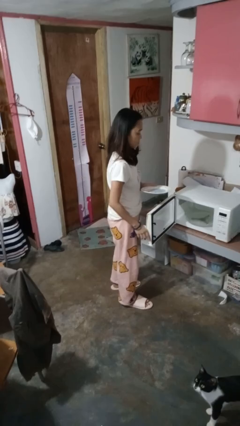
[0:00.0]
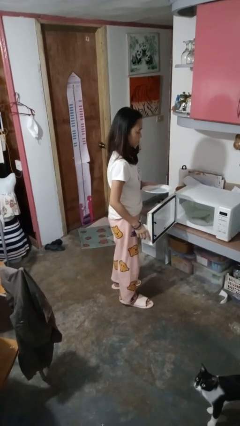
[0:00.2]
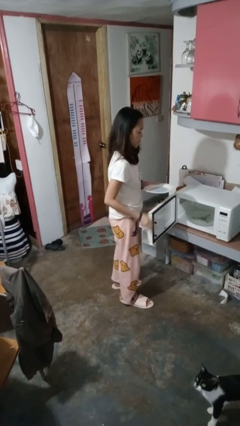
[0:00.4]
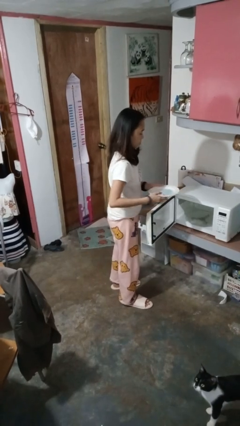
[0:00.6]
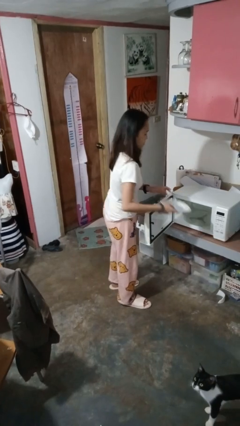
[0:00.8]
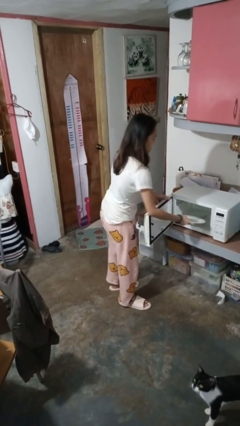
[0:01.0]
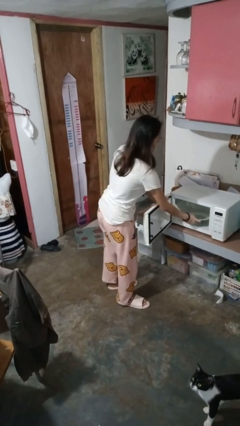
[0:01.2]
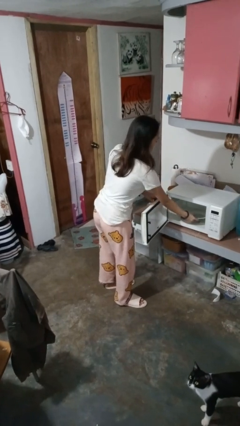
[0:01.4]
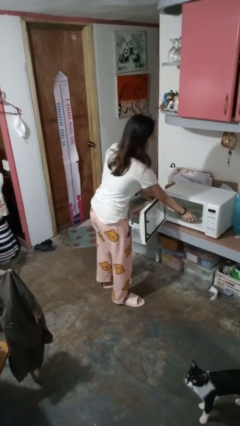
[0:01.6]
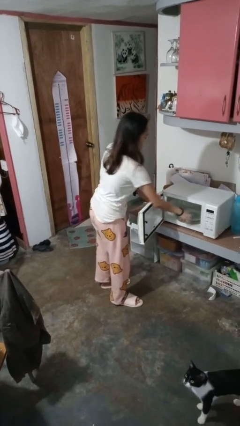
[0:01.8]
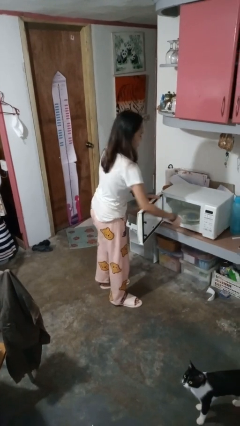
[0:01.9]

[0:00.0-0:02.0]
person puts object into microwave

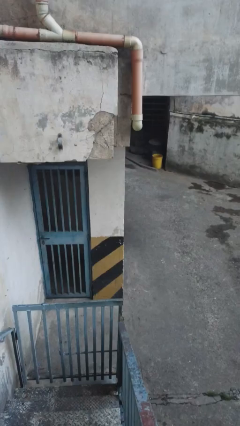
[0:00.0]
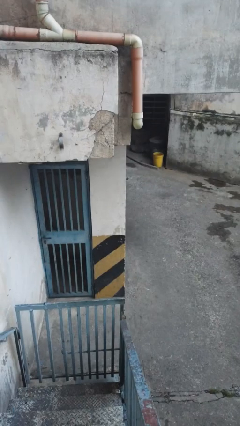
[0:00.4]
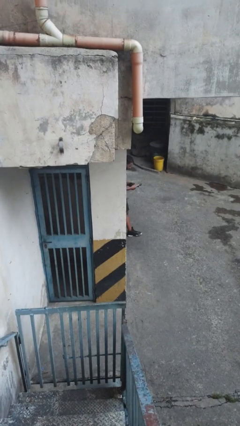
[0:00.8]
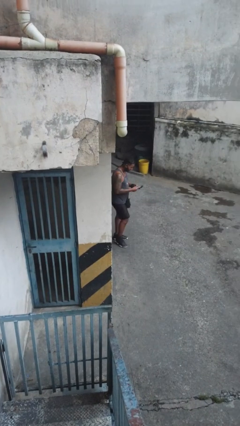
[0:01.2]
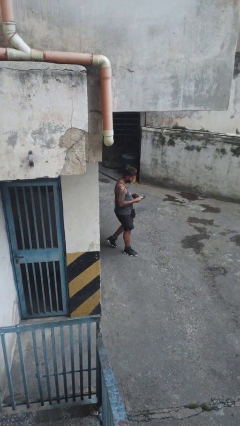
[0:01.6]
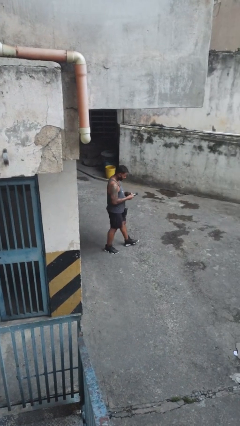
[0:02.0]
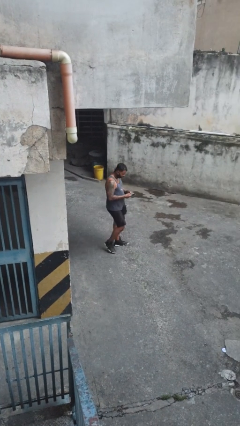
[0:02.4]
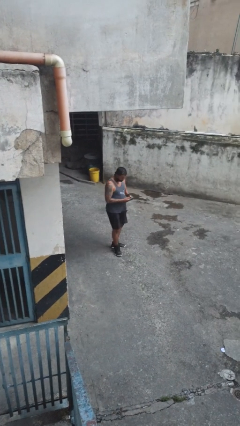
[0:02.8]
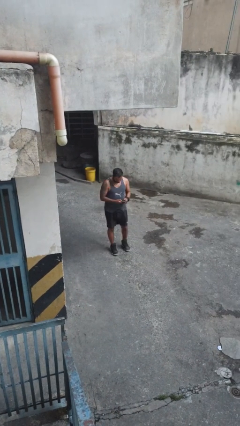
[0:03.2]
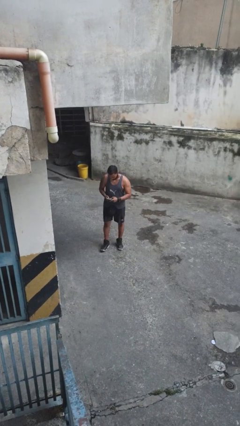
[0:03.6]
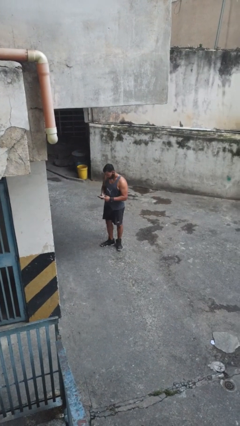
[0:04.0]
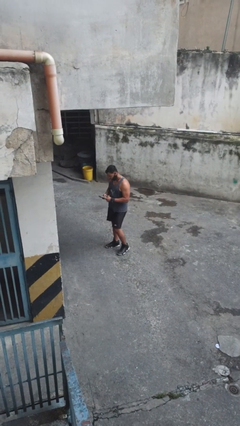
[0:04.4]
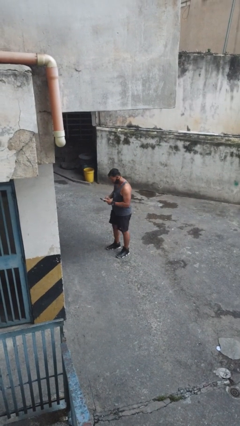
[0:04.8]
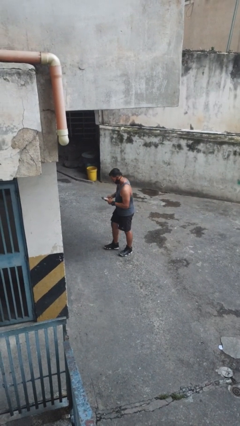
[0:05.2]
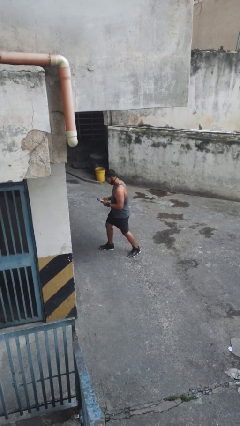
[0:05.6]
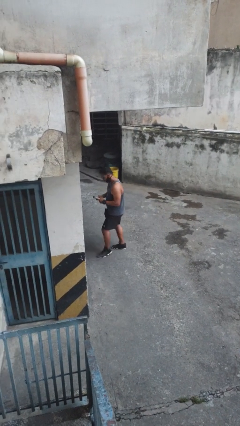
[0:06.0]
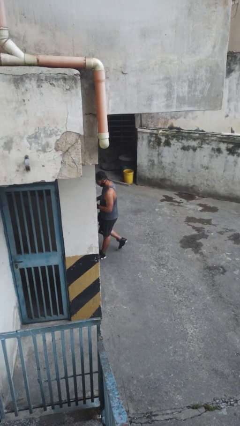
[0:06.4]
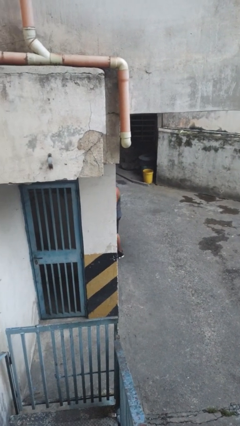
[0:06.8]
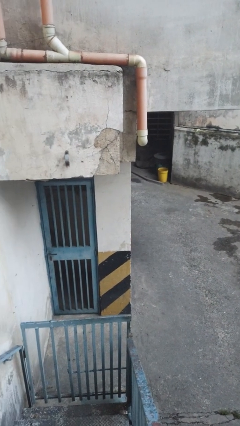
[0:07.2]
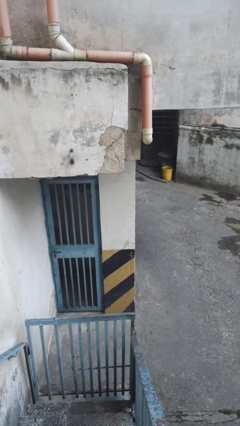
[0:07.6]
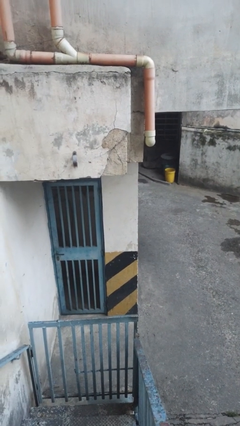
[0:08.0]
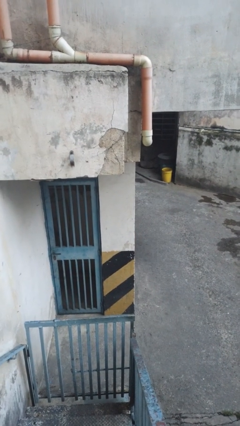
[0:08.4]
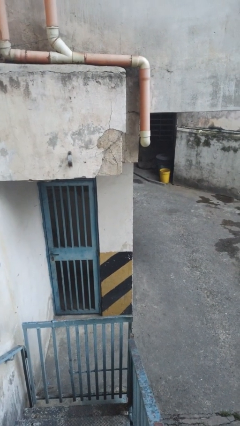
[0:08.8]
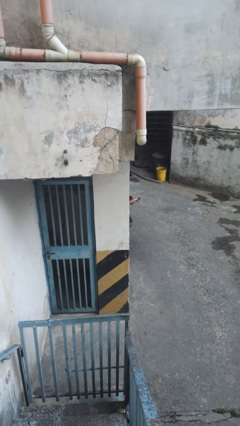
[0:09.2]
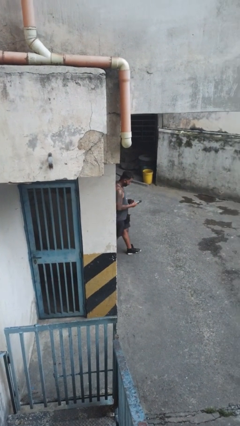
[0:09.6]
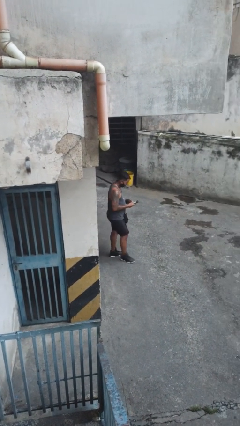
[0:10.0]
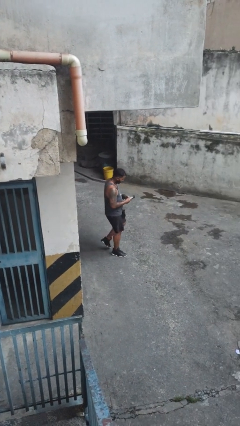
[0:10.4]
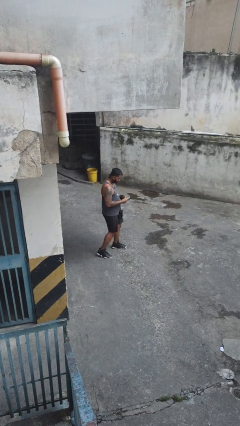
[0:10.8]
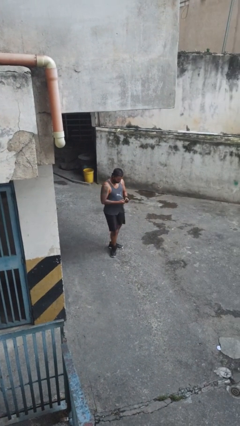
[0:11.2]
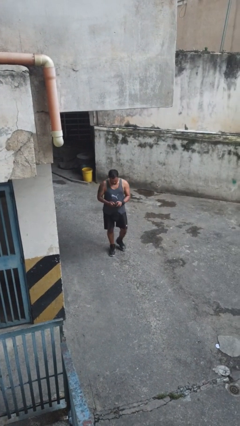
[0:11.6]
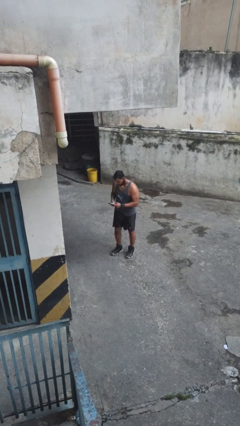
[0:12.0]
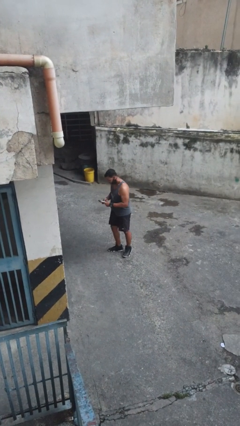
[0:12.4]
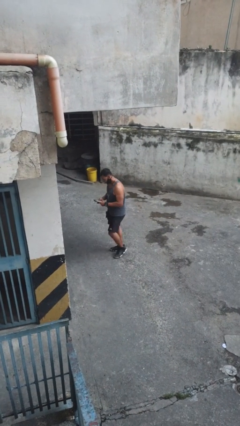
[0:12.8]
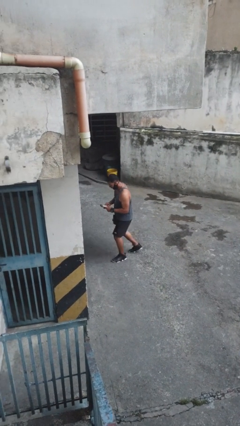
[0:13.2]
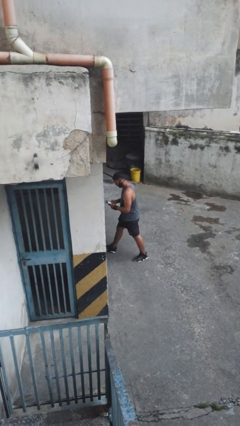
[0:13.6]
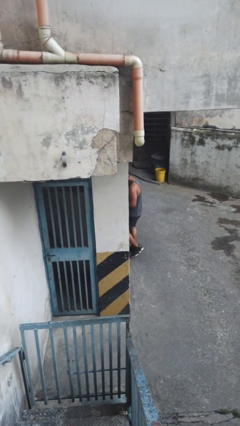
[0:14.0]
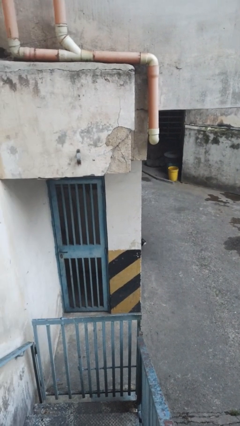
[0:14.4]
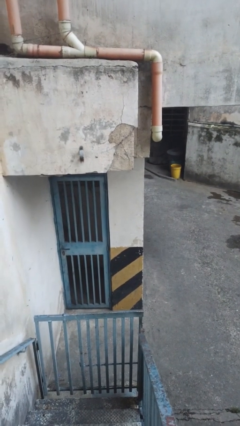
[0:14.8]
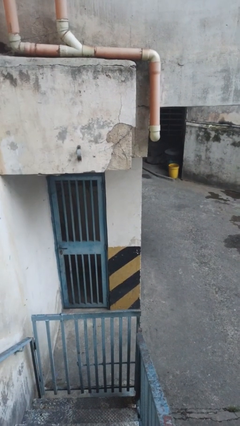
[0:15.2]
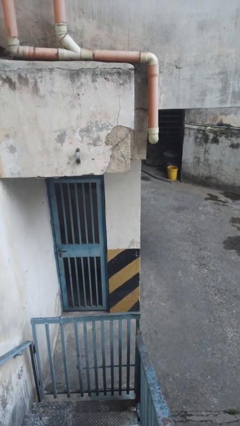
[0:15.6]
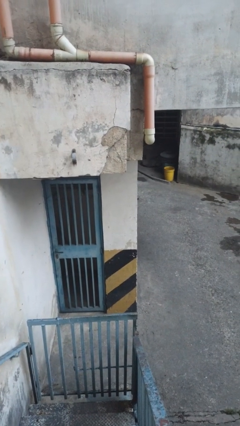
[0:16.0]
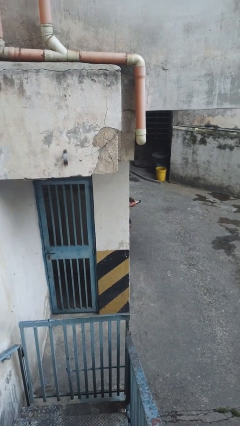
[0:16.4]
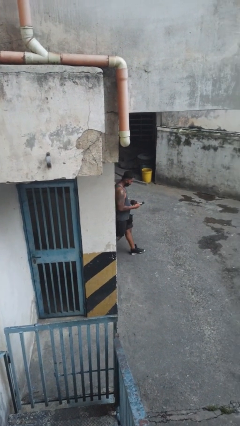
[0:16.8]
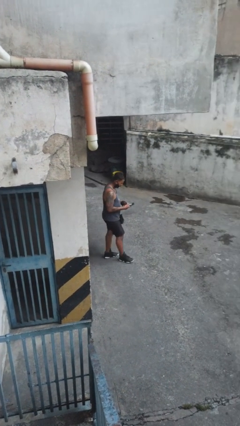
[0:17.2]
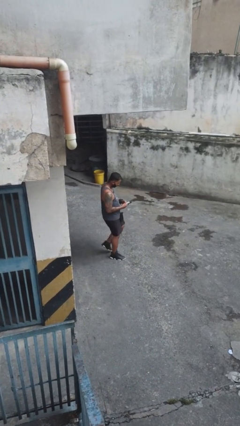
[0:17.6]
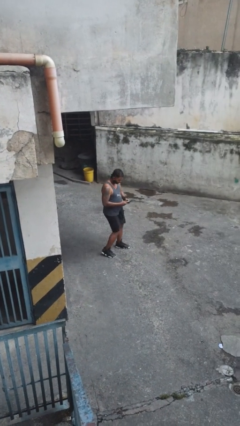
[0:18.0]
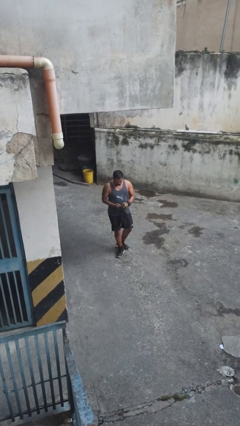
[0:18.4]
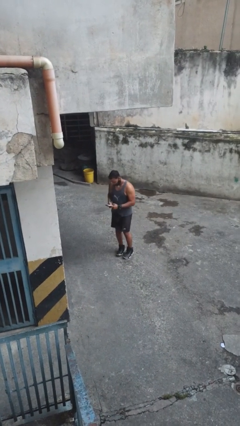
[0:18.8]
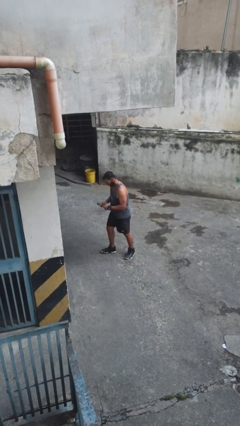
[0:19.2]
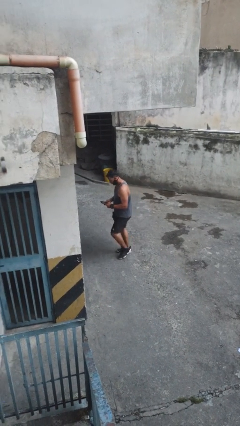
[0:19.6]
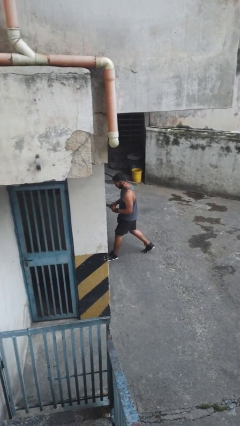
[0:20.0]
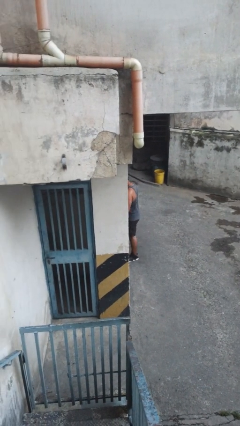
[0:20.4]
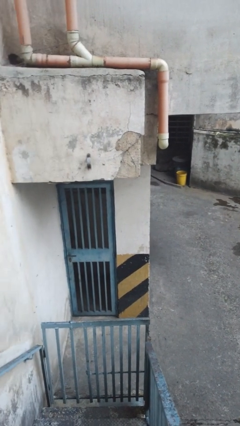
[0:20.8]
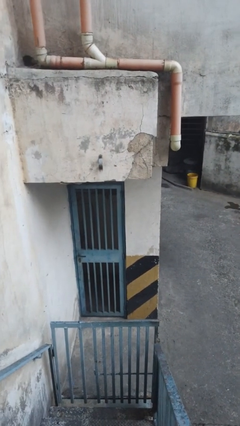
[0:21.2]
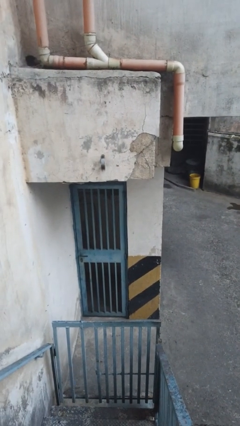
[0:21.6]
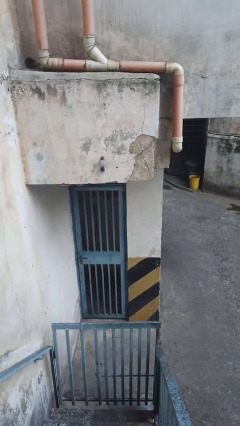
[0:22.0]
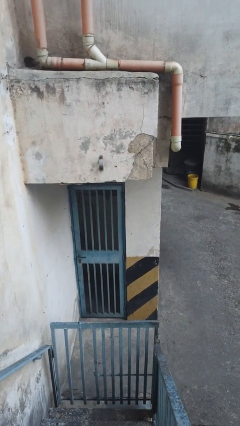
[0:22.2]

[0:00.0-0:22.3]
person texts on phone

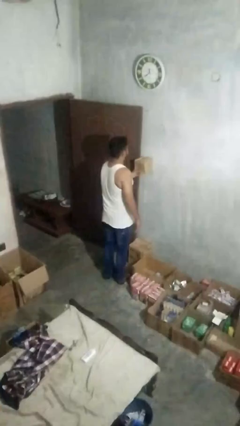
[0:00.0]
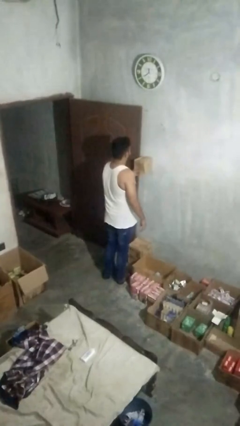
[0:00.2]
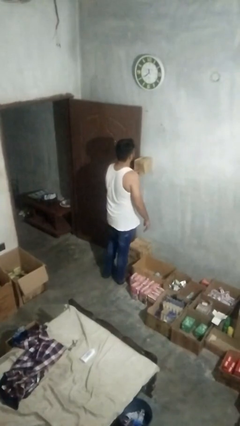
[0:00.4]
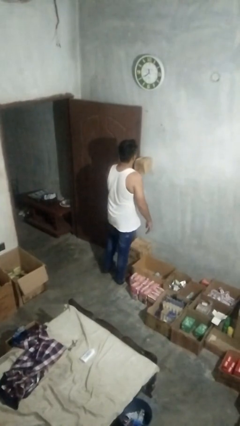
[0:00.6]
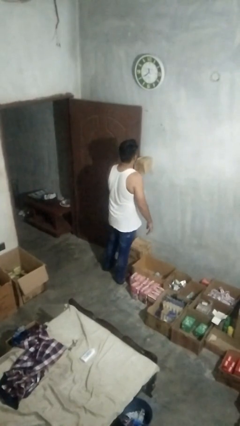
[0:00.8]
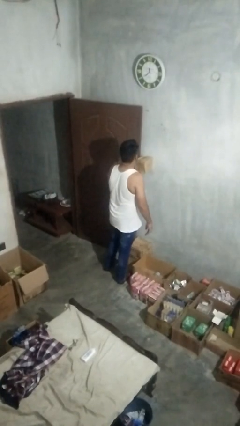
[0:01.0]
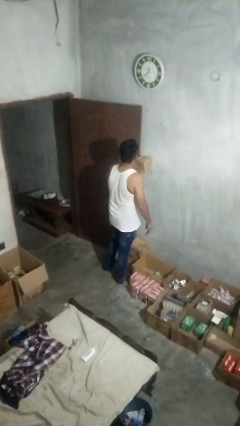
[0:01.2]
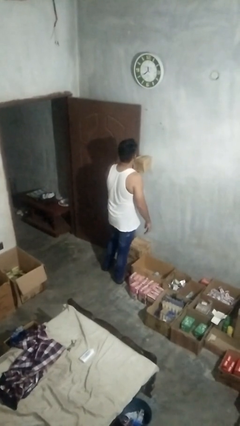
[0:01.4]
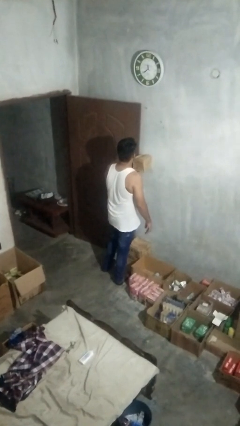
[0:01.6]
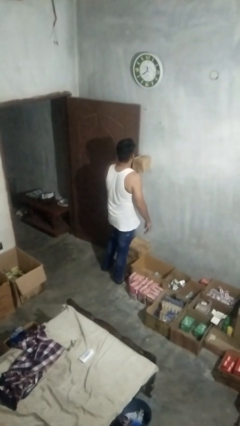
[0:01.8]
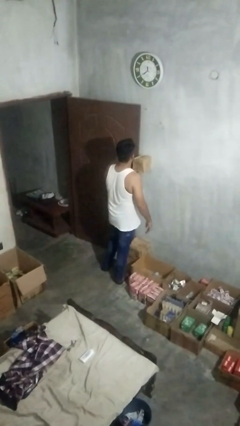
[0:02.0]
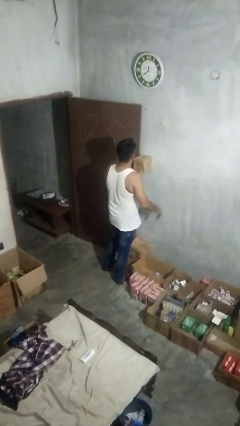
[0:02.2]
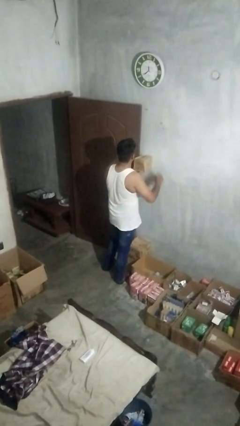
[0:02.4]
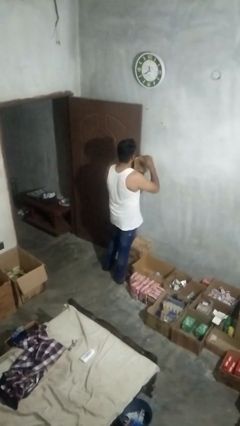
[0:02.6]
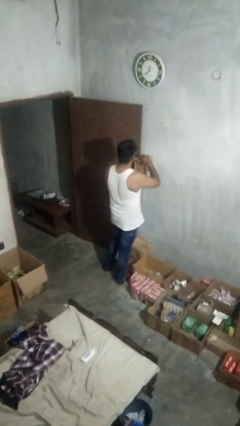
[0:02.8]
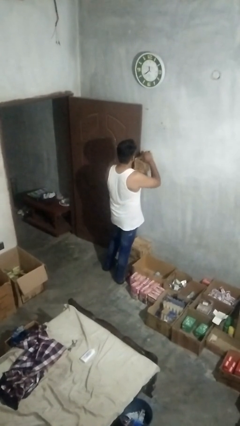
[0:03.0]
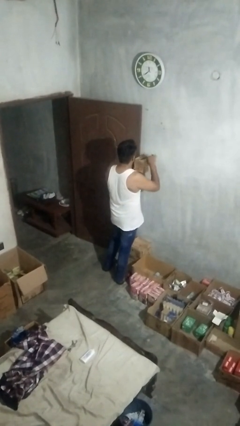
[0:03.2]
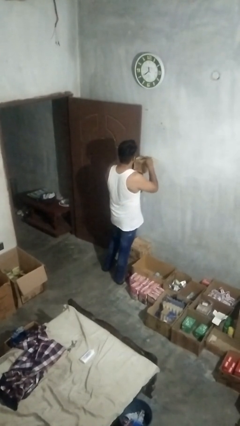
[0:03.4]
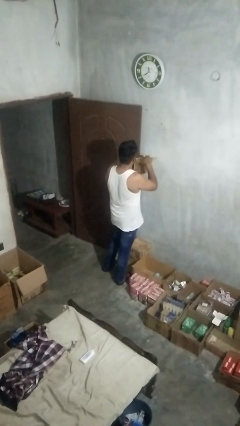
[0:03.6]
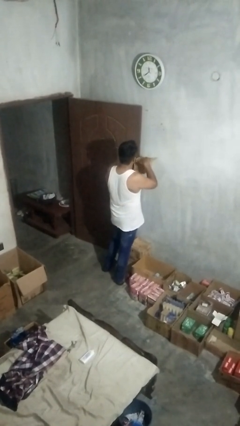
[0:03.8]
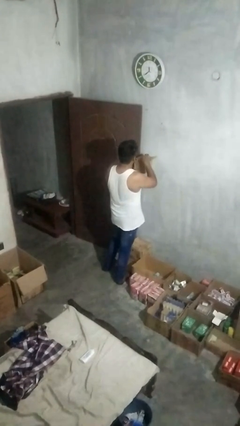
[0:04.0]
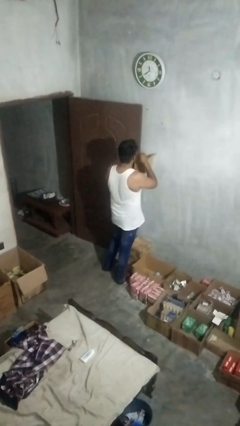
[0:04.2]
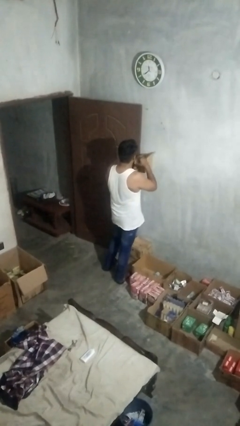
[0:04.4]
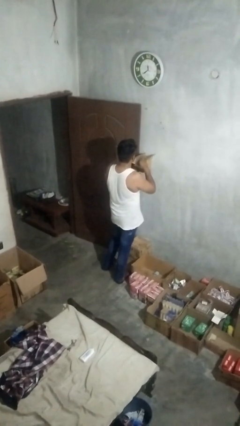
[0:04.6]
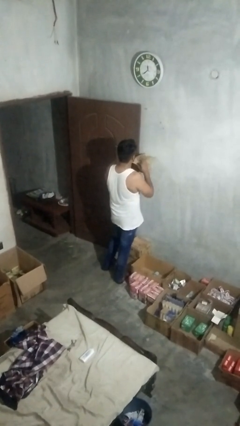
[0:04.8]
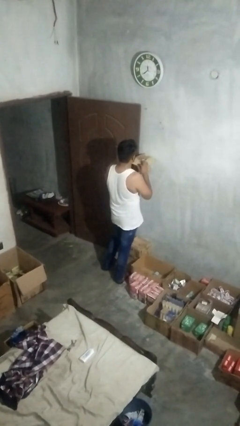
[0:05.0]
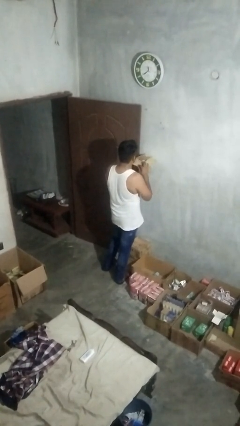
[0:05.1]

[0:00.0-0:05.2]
person opens mailbox
